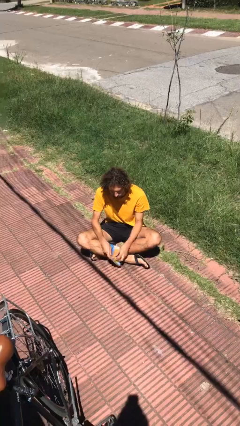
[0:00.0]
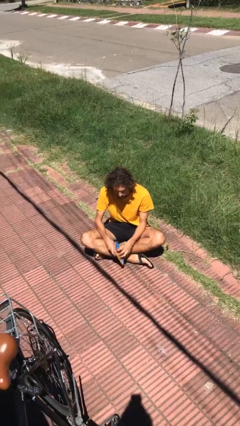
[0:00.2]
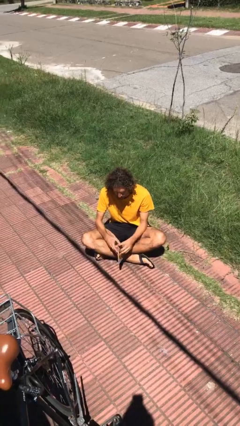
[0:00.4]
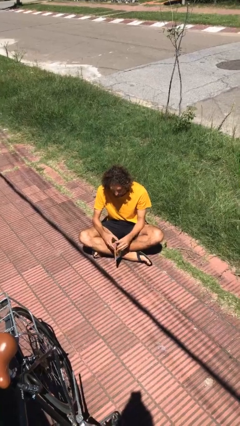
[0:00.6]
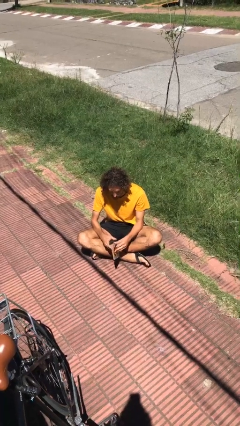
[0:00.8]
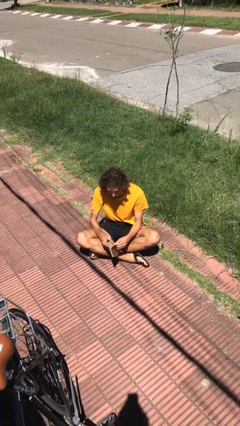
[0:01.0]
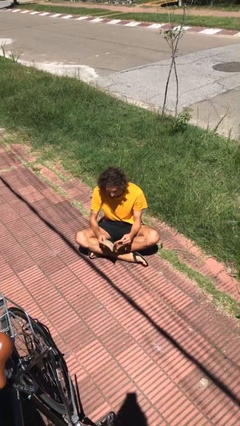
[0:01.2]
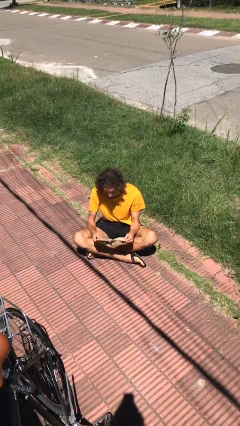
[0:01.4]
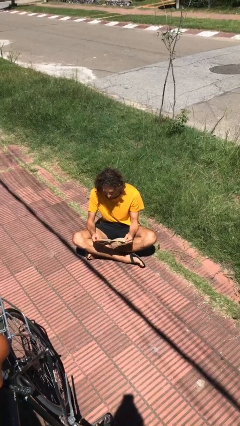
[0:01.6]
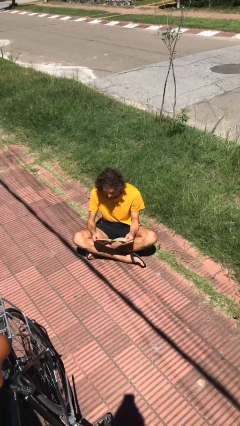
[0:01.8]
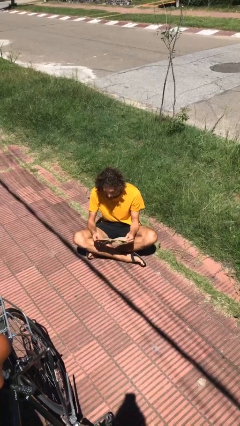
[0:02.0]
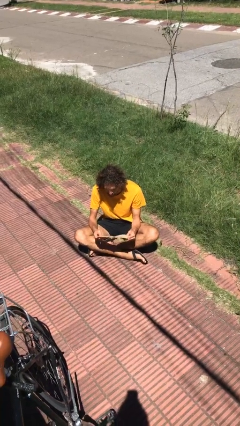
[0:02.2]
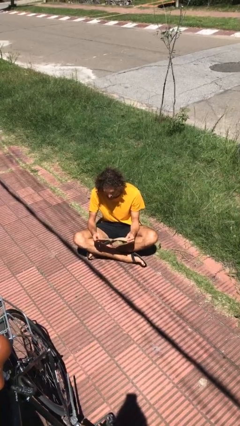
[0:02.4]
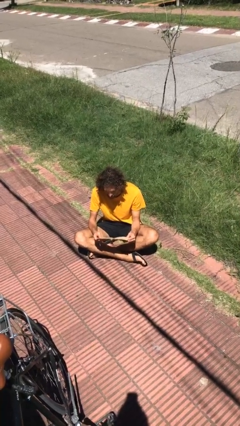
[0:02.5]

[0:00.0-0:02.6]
person reads document

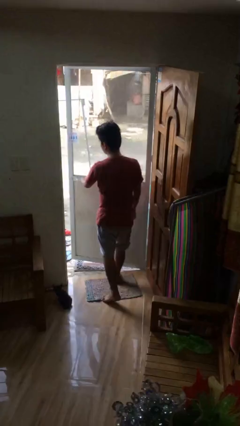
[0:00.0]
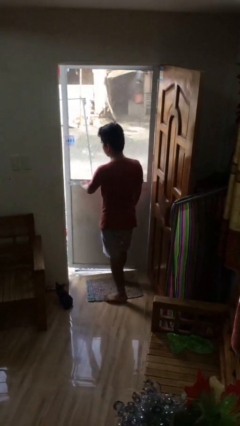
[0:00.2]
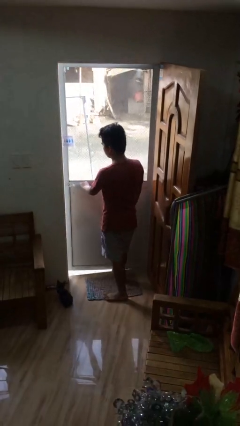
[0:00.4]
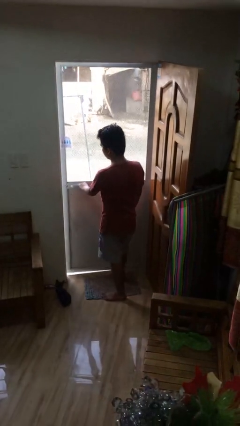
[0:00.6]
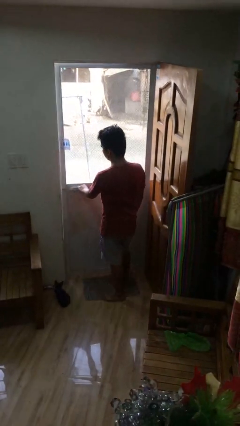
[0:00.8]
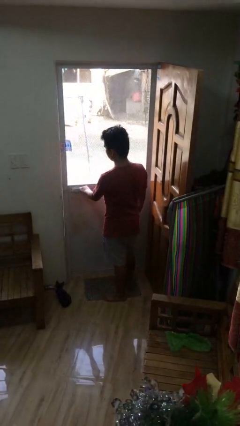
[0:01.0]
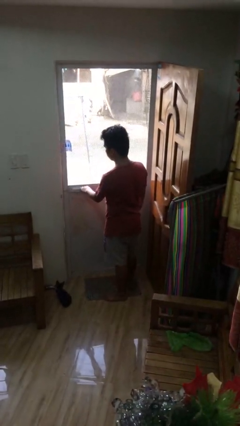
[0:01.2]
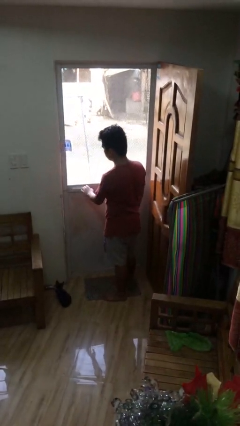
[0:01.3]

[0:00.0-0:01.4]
person closes facility door

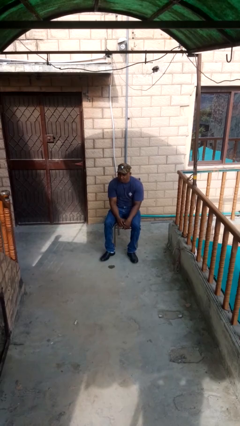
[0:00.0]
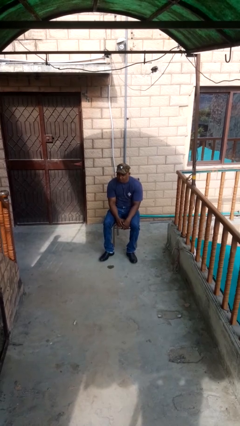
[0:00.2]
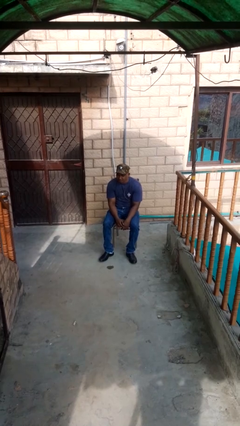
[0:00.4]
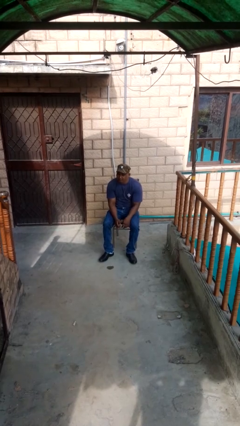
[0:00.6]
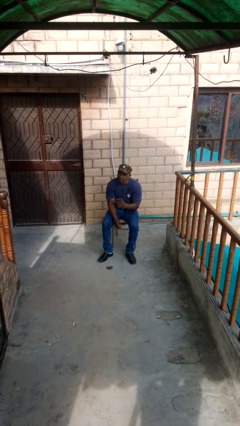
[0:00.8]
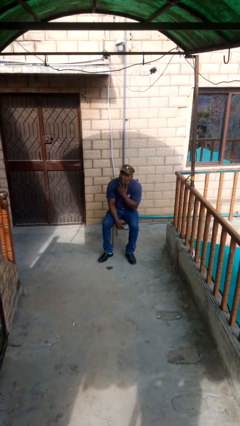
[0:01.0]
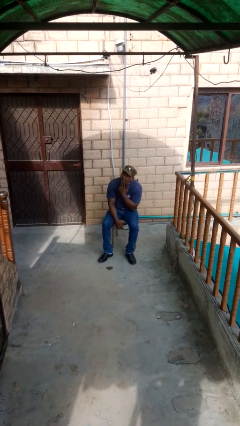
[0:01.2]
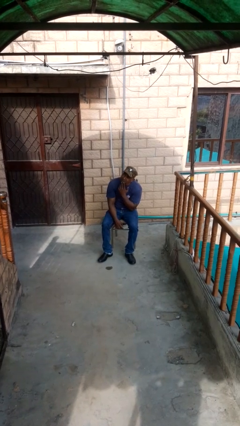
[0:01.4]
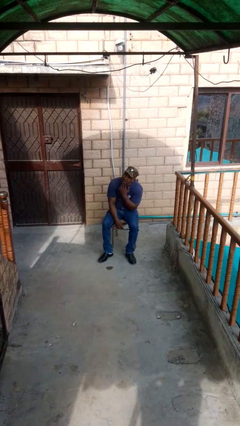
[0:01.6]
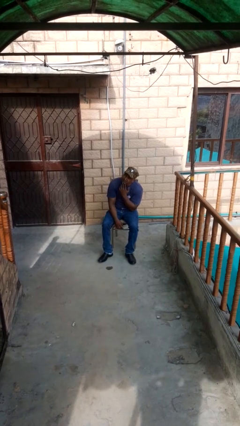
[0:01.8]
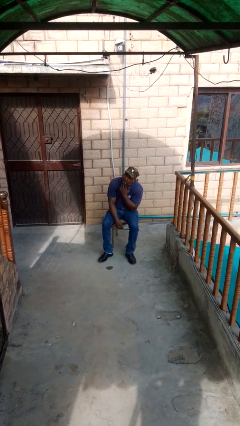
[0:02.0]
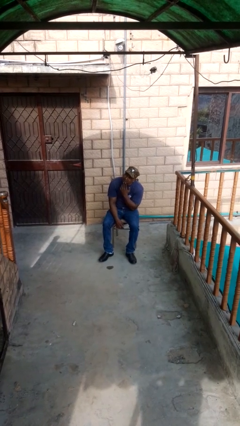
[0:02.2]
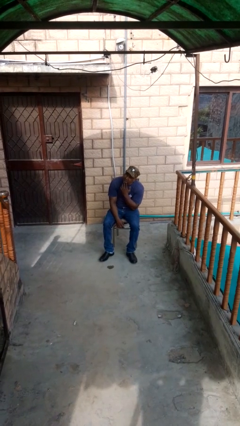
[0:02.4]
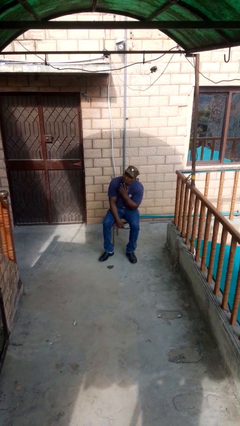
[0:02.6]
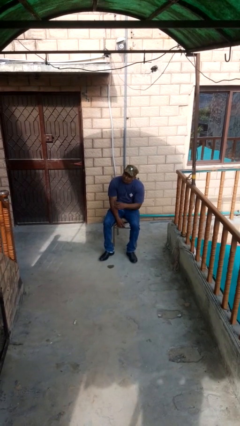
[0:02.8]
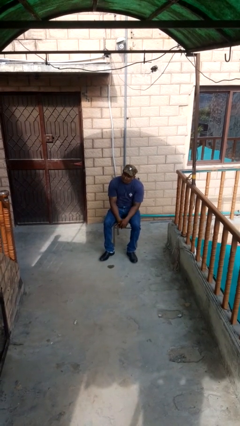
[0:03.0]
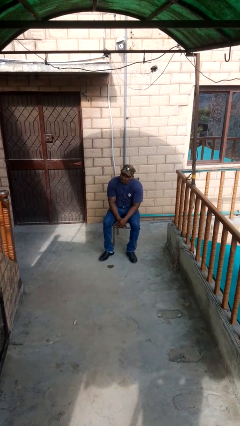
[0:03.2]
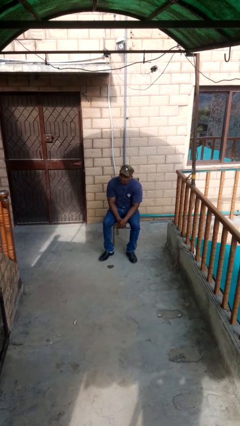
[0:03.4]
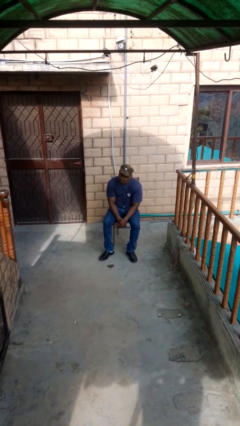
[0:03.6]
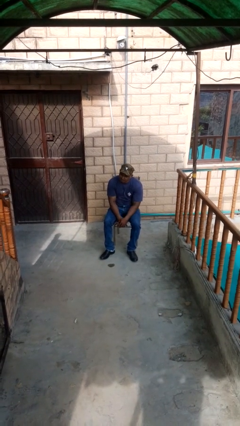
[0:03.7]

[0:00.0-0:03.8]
person strokes chin

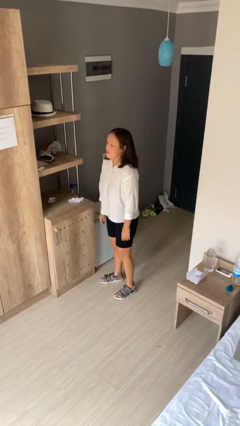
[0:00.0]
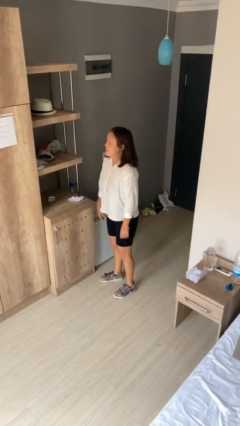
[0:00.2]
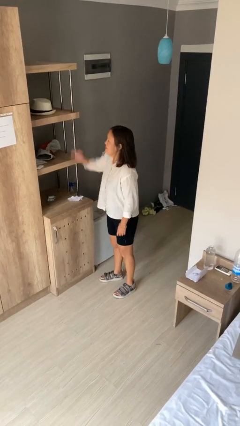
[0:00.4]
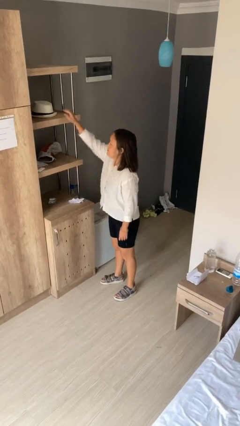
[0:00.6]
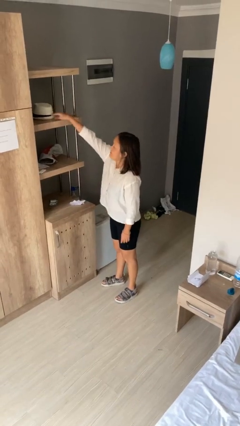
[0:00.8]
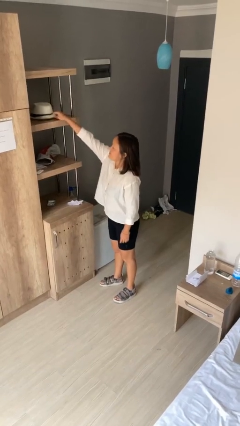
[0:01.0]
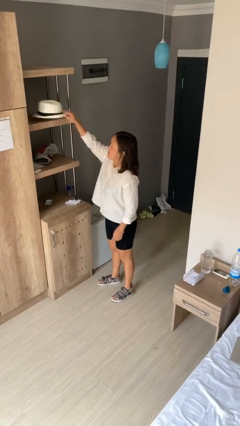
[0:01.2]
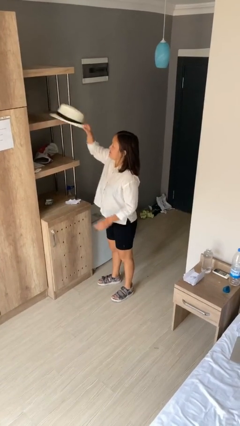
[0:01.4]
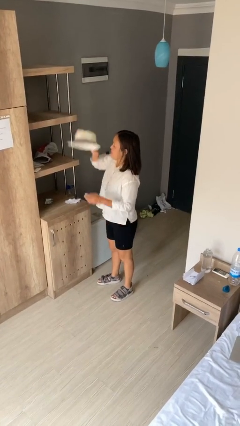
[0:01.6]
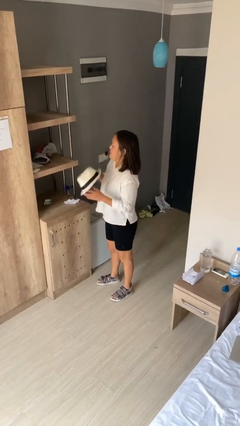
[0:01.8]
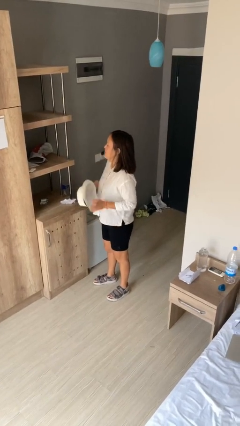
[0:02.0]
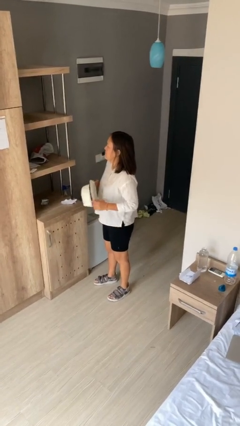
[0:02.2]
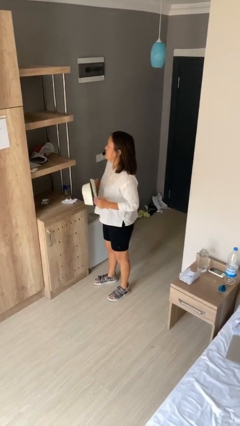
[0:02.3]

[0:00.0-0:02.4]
person picks up object from shelf

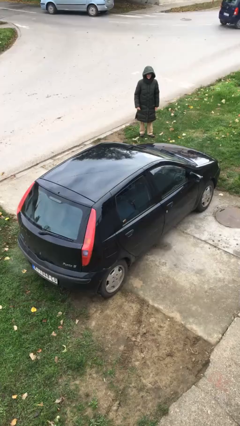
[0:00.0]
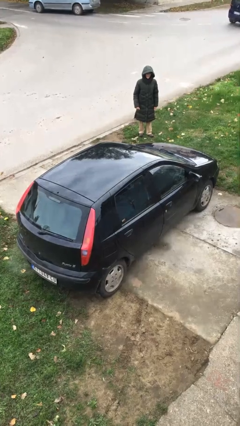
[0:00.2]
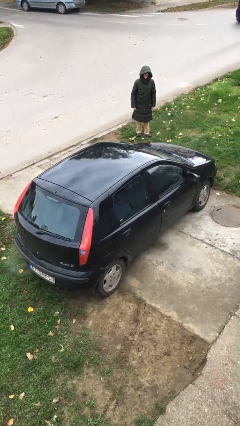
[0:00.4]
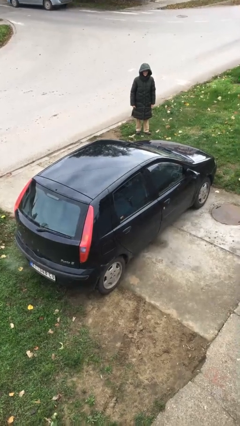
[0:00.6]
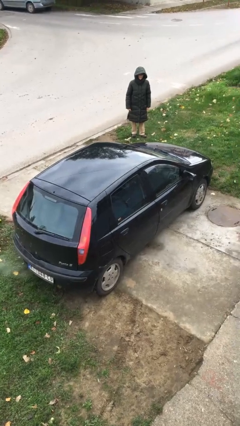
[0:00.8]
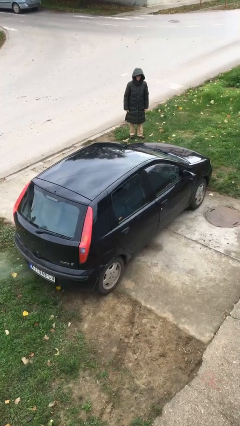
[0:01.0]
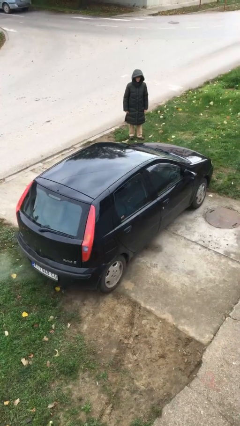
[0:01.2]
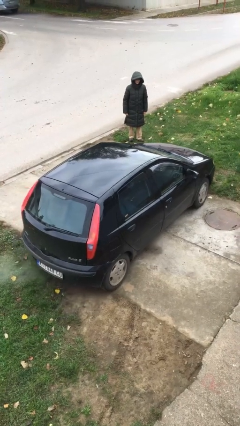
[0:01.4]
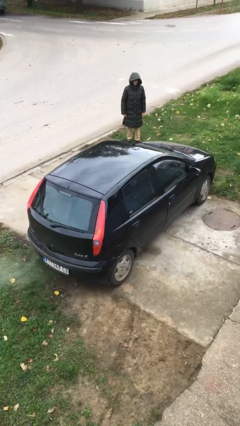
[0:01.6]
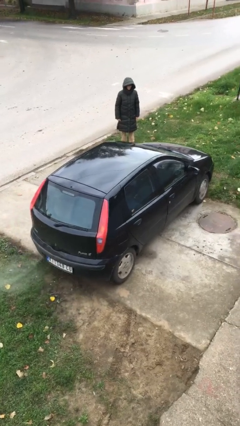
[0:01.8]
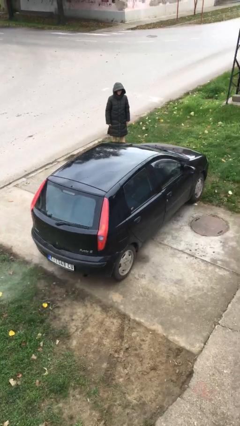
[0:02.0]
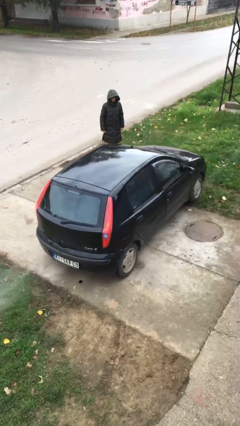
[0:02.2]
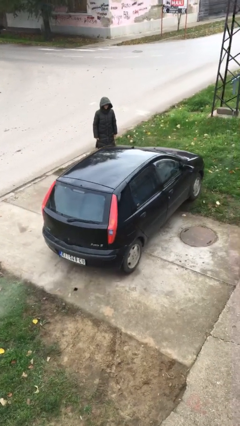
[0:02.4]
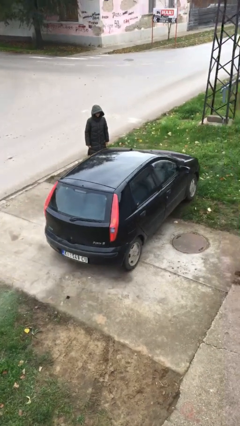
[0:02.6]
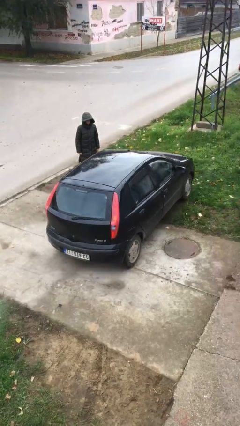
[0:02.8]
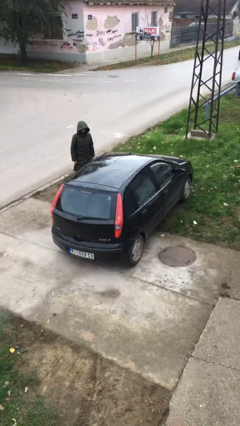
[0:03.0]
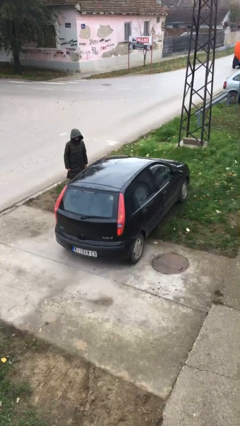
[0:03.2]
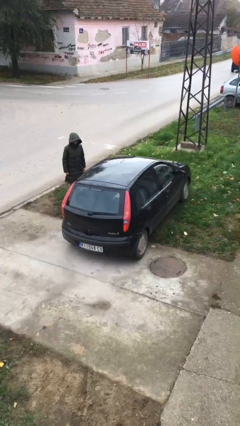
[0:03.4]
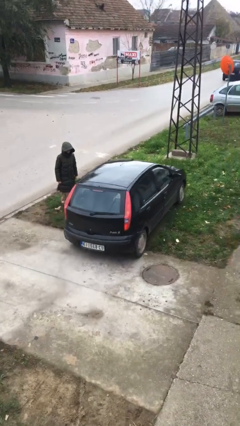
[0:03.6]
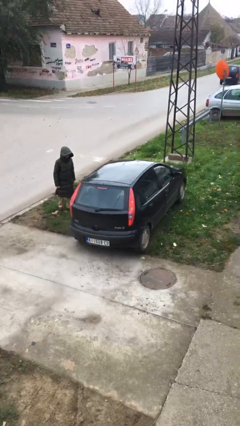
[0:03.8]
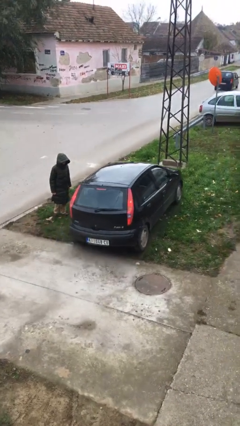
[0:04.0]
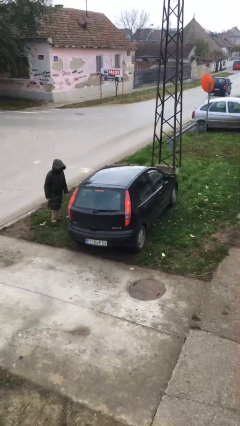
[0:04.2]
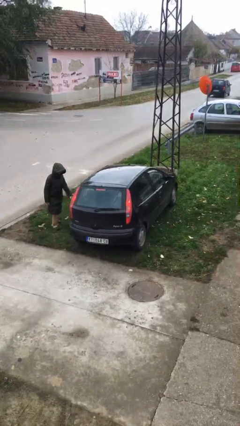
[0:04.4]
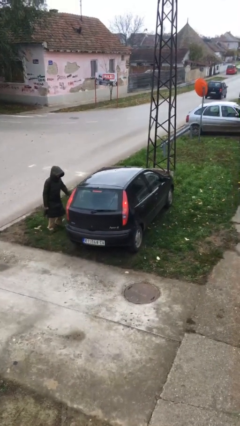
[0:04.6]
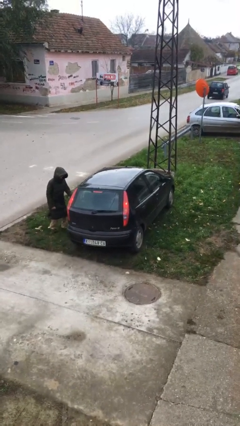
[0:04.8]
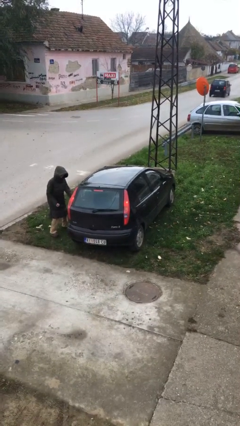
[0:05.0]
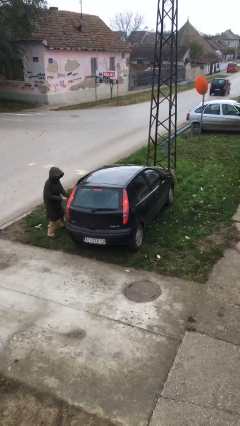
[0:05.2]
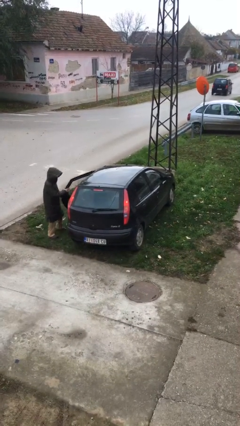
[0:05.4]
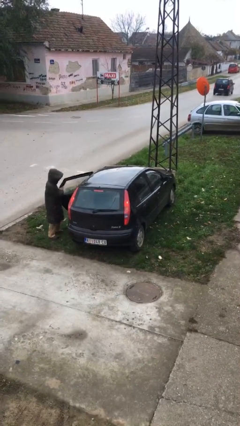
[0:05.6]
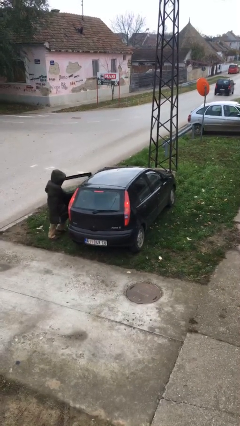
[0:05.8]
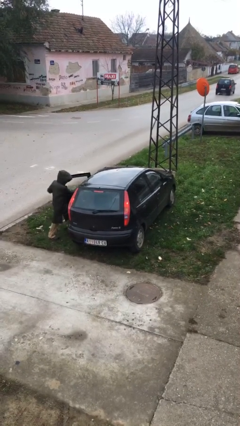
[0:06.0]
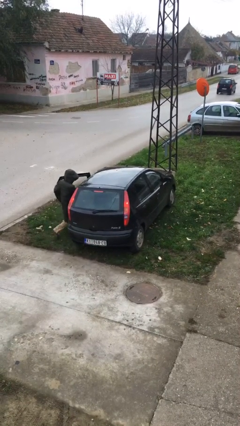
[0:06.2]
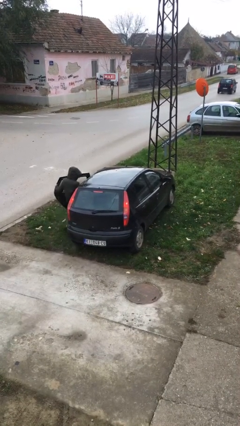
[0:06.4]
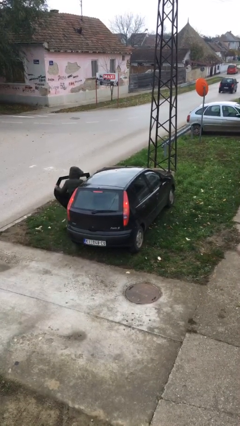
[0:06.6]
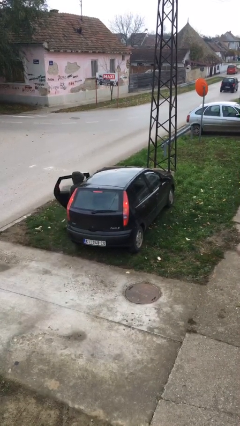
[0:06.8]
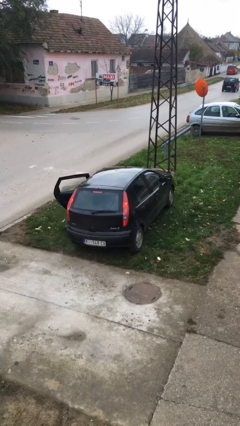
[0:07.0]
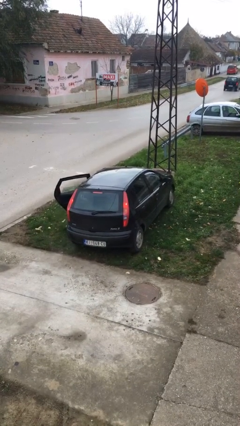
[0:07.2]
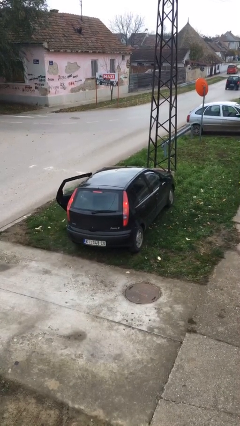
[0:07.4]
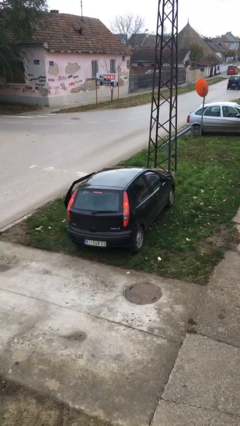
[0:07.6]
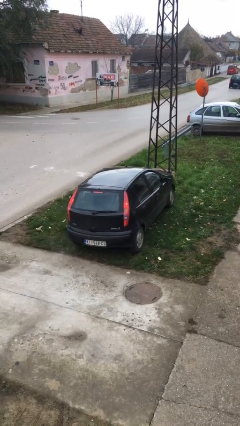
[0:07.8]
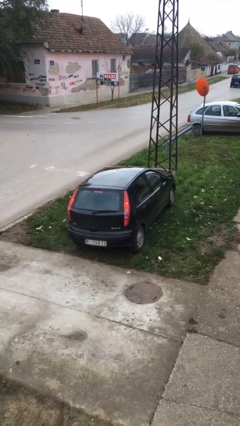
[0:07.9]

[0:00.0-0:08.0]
car picks up person
